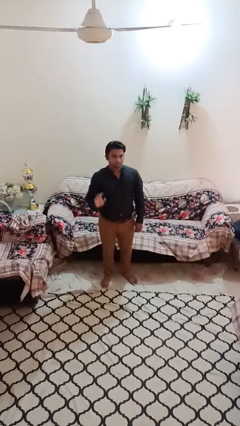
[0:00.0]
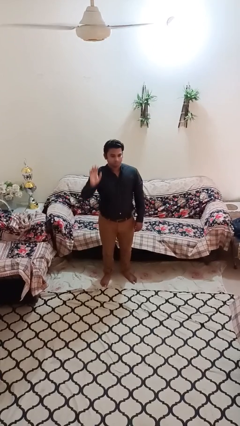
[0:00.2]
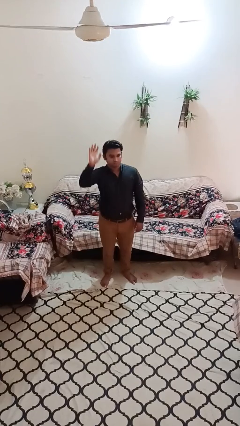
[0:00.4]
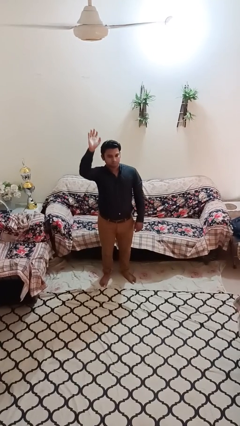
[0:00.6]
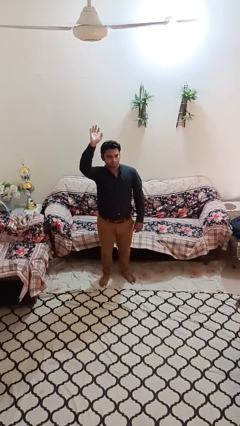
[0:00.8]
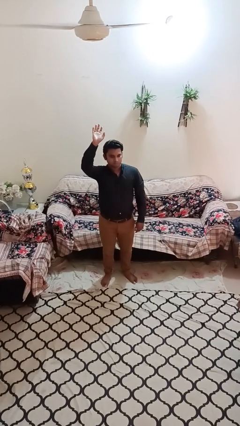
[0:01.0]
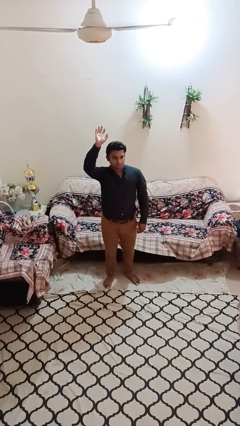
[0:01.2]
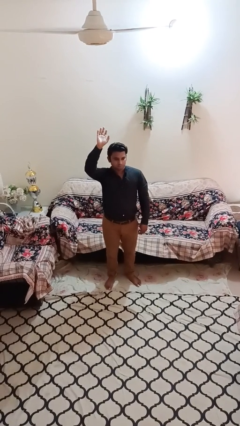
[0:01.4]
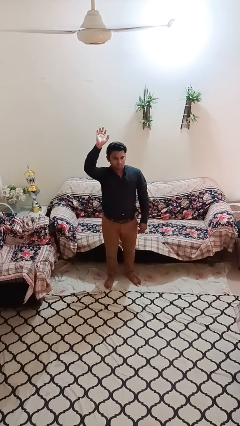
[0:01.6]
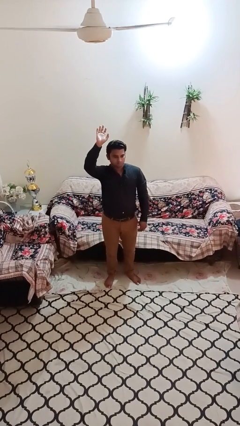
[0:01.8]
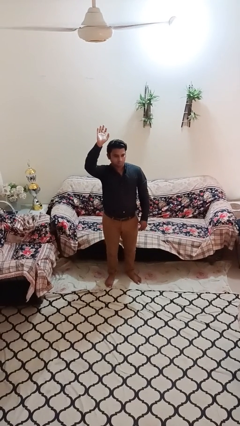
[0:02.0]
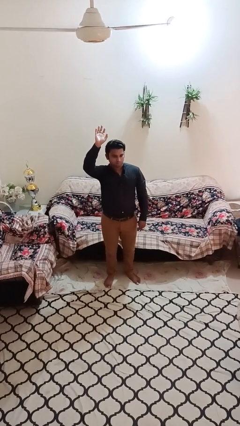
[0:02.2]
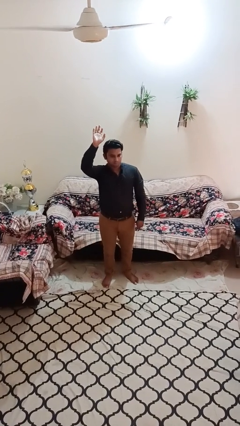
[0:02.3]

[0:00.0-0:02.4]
person gestures raise hand

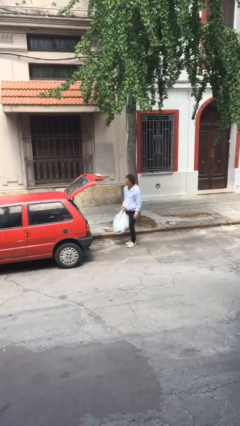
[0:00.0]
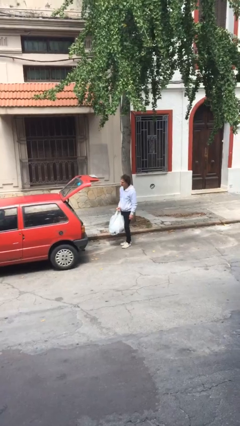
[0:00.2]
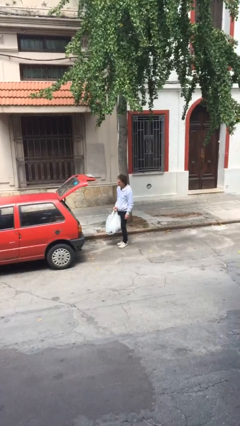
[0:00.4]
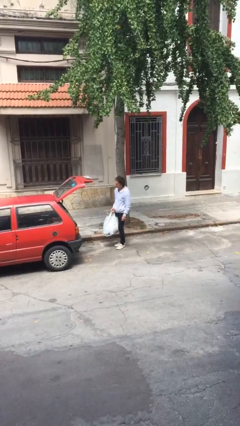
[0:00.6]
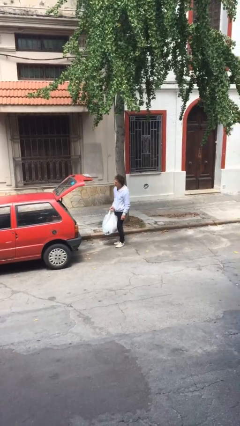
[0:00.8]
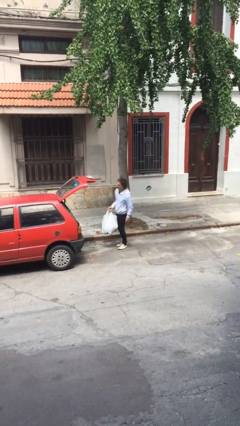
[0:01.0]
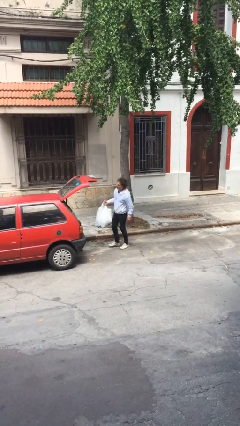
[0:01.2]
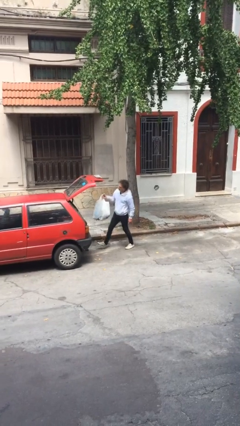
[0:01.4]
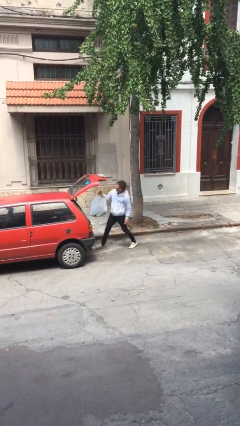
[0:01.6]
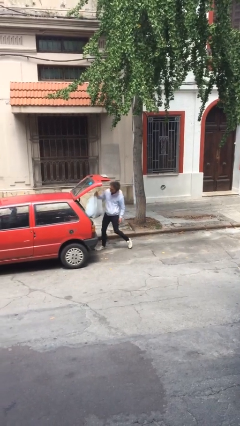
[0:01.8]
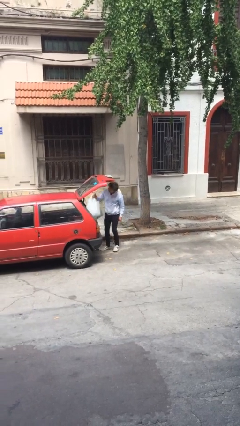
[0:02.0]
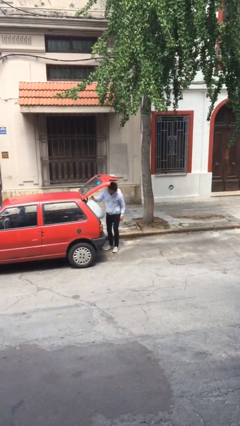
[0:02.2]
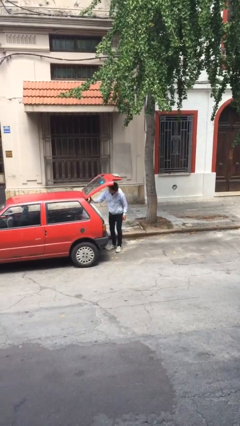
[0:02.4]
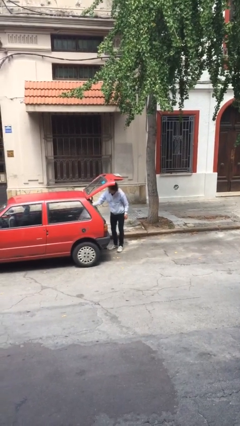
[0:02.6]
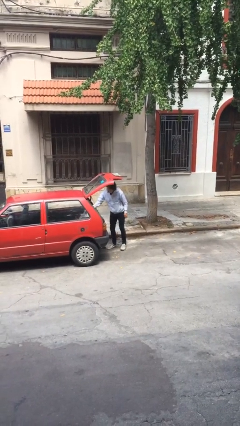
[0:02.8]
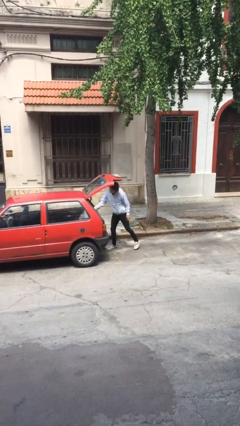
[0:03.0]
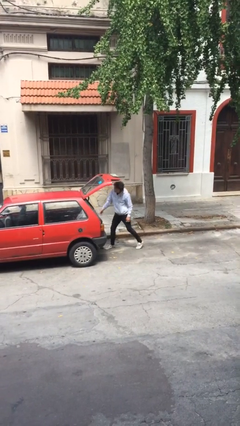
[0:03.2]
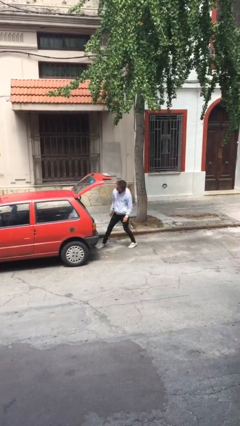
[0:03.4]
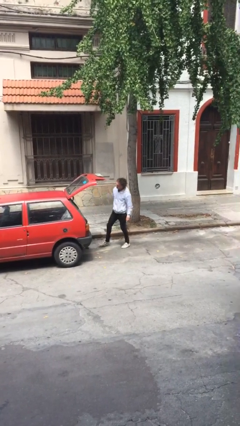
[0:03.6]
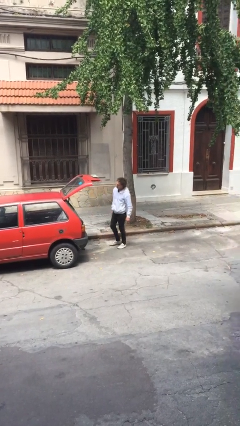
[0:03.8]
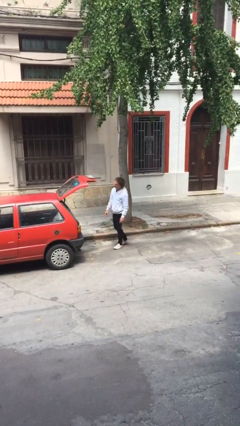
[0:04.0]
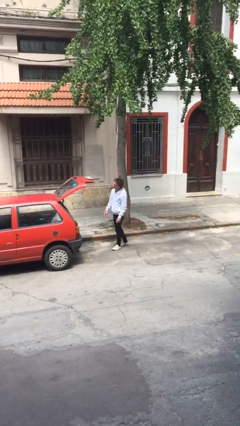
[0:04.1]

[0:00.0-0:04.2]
person loads car

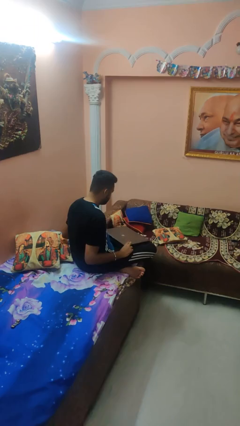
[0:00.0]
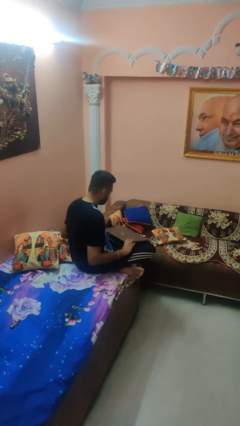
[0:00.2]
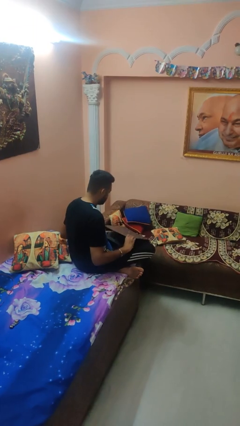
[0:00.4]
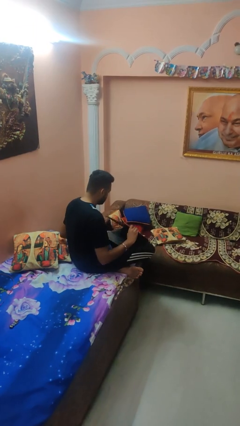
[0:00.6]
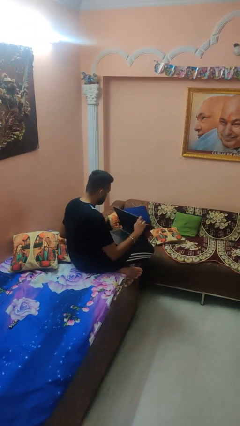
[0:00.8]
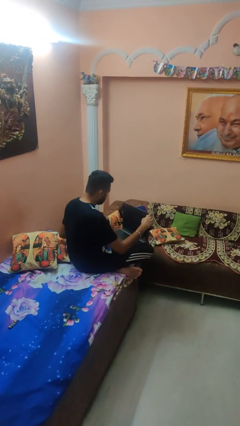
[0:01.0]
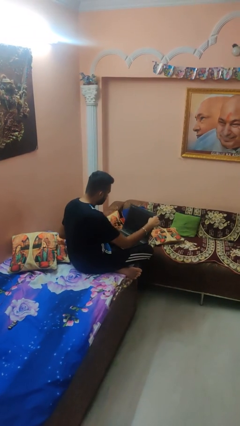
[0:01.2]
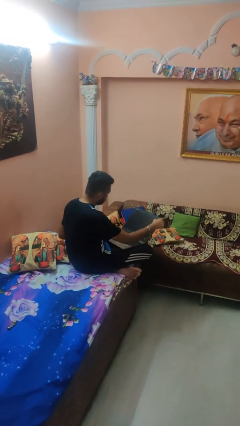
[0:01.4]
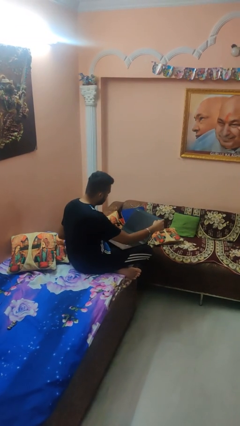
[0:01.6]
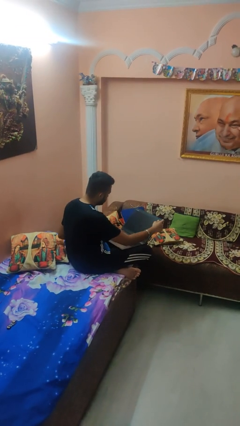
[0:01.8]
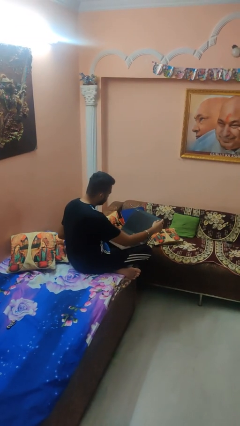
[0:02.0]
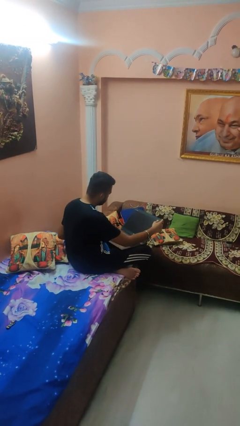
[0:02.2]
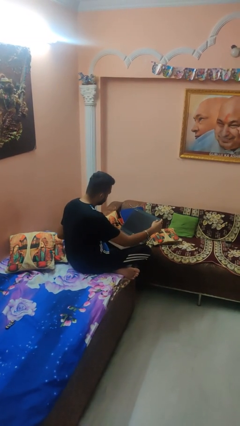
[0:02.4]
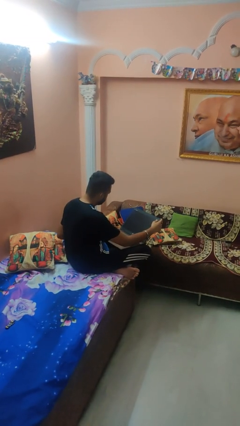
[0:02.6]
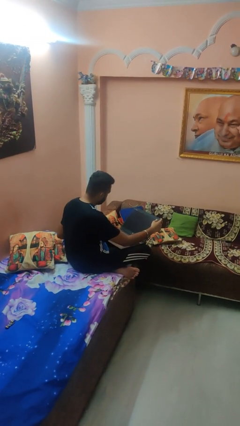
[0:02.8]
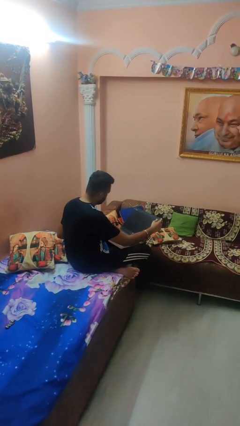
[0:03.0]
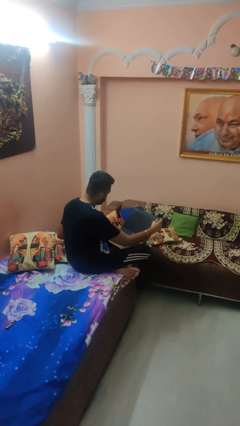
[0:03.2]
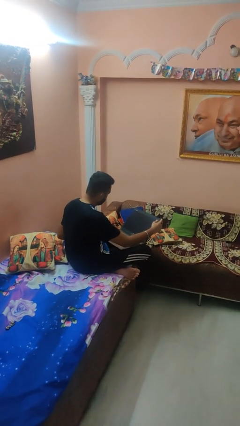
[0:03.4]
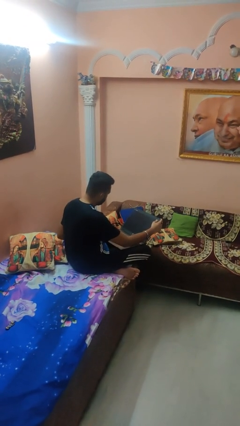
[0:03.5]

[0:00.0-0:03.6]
person opens laptop

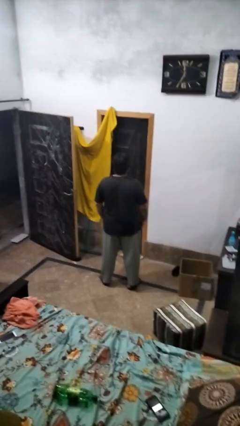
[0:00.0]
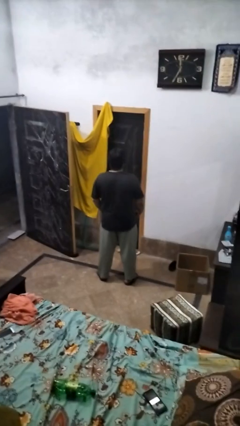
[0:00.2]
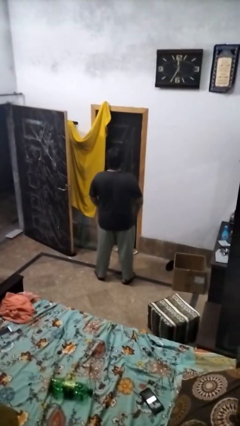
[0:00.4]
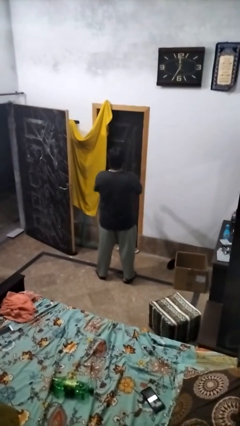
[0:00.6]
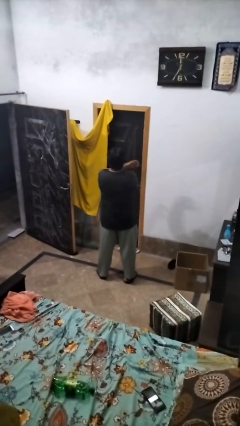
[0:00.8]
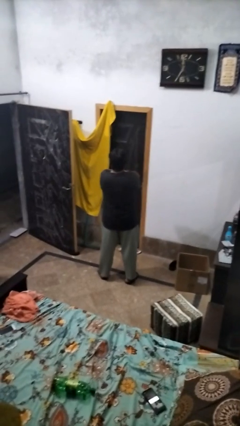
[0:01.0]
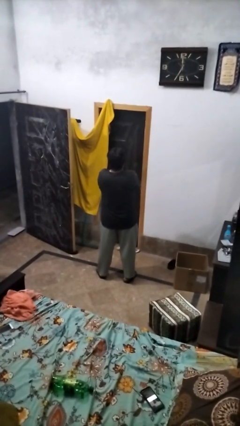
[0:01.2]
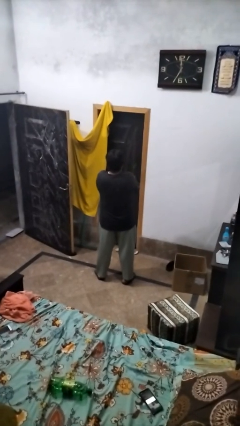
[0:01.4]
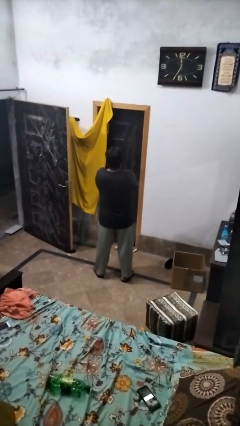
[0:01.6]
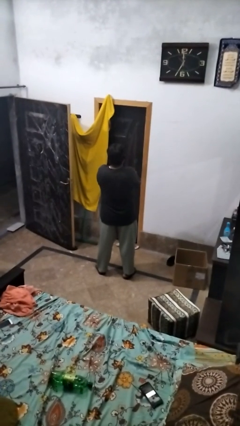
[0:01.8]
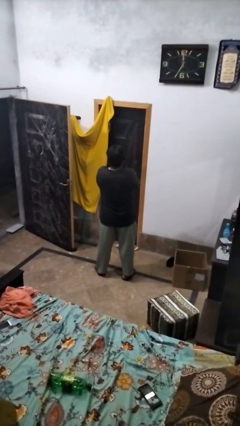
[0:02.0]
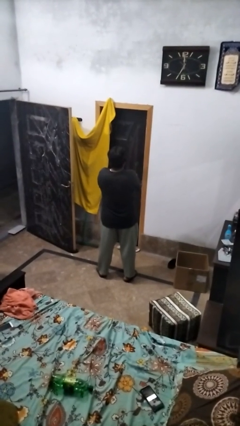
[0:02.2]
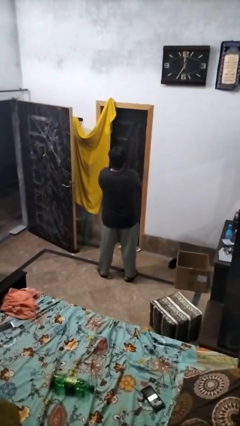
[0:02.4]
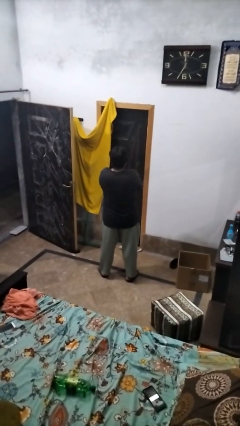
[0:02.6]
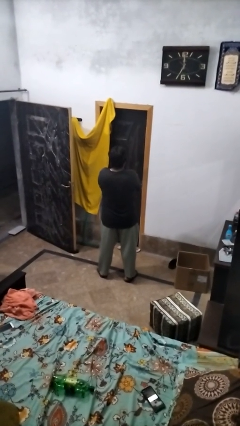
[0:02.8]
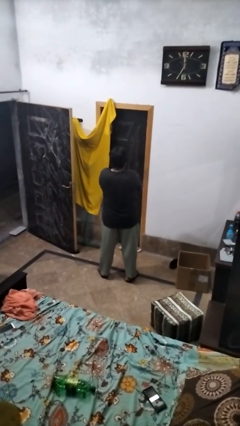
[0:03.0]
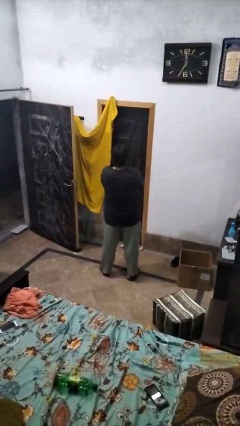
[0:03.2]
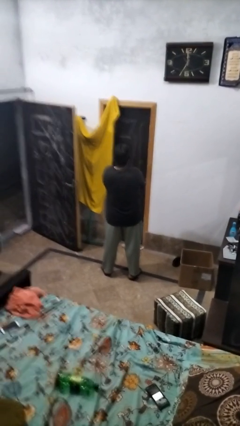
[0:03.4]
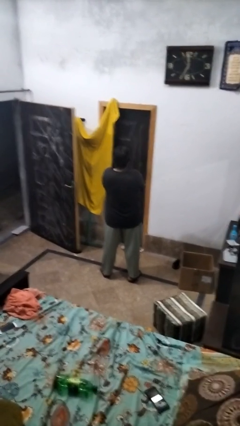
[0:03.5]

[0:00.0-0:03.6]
person gestures arms x

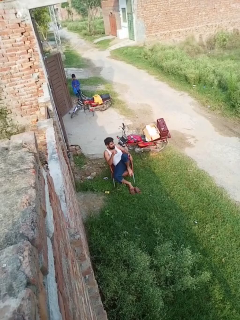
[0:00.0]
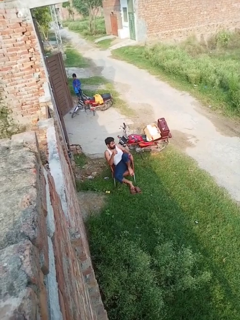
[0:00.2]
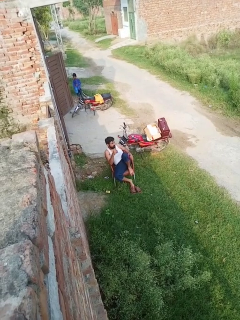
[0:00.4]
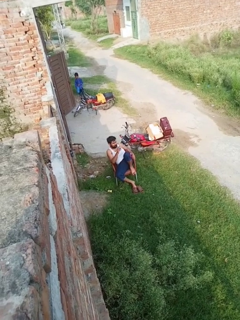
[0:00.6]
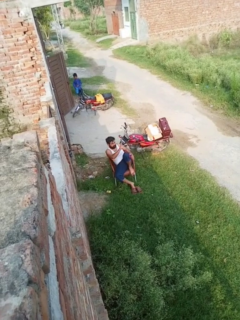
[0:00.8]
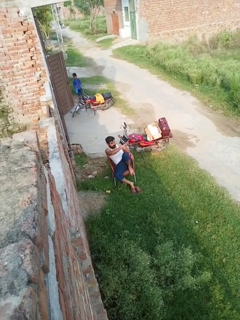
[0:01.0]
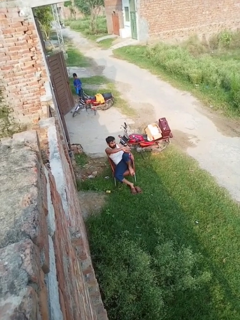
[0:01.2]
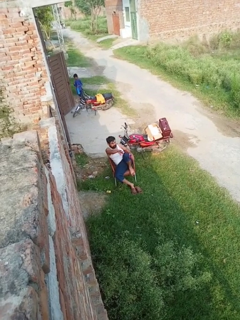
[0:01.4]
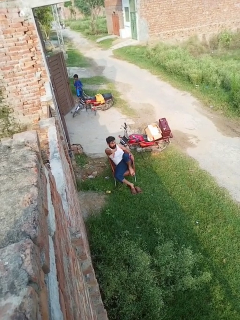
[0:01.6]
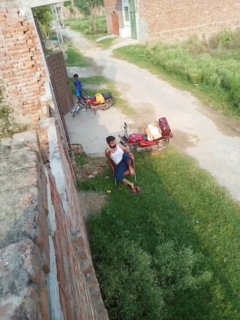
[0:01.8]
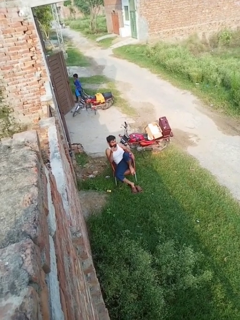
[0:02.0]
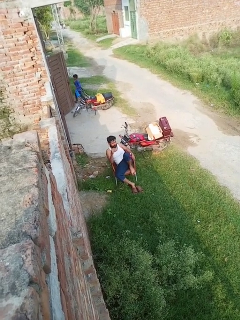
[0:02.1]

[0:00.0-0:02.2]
person gestures swipe right

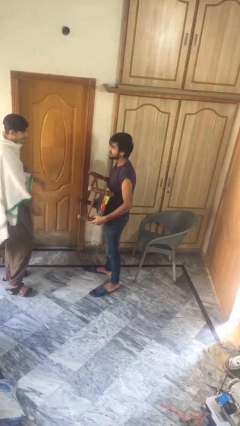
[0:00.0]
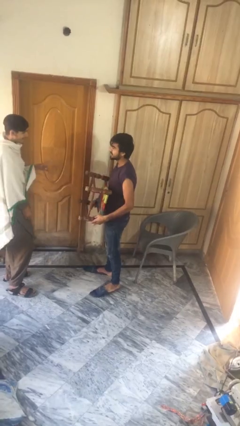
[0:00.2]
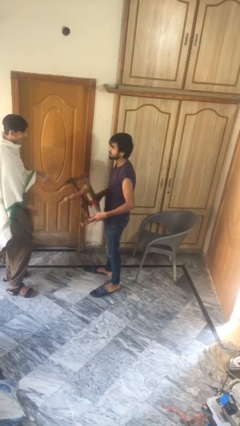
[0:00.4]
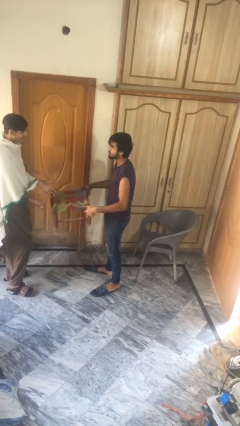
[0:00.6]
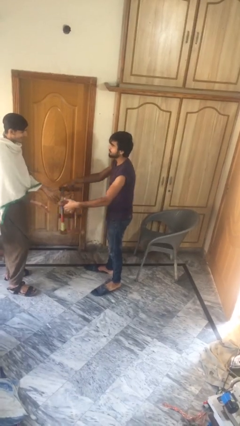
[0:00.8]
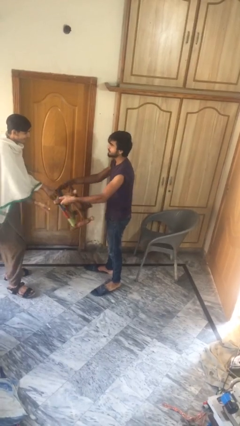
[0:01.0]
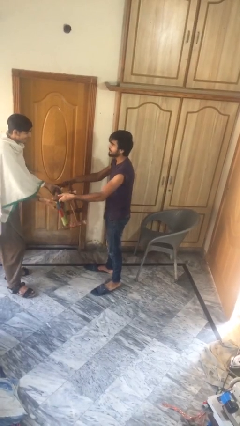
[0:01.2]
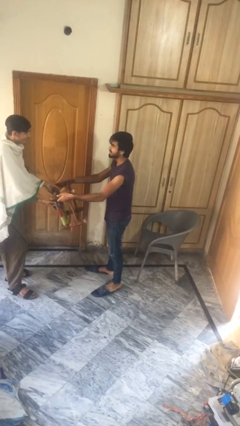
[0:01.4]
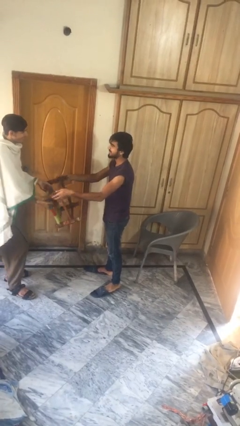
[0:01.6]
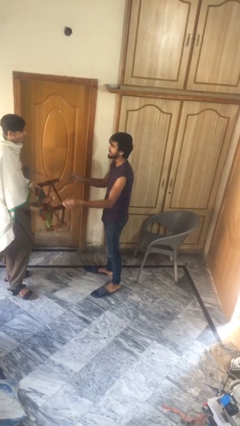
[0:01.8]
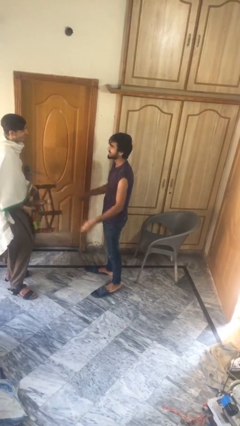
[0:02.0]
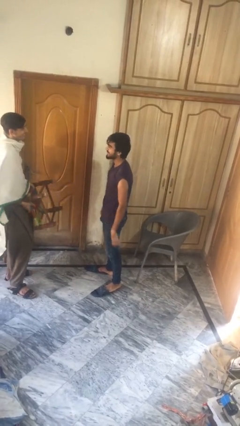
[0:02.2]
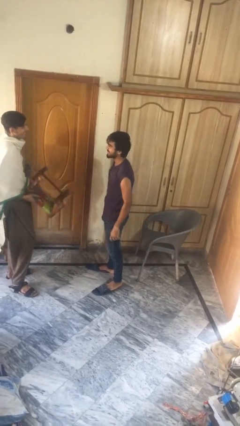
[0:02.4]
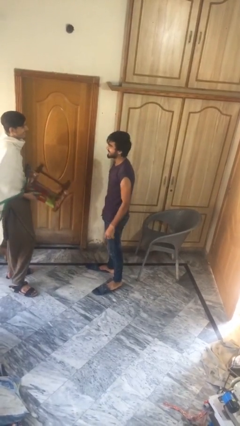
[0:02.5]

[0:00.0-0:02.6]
person transfers object to person
